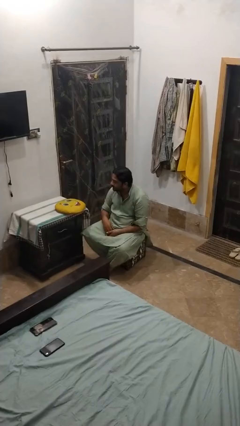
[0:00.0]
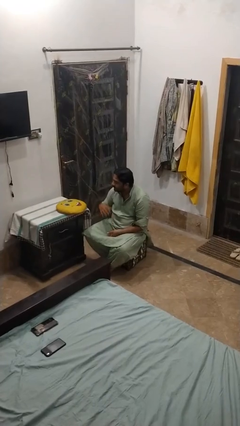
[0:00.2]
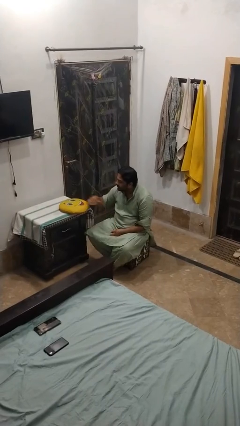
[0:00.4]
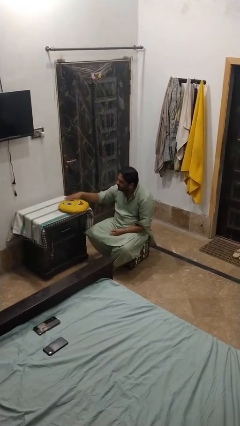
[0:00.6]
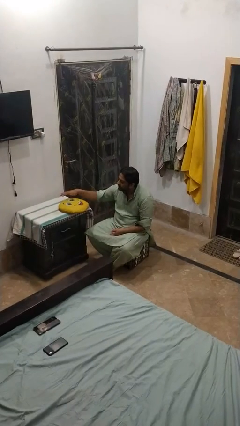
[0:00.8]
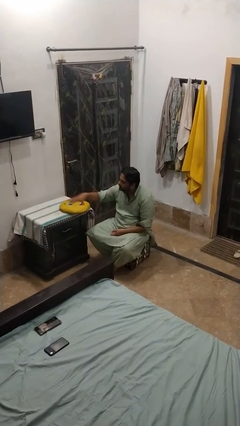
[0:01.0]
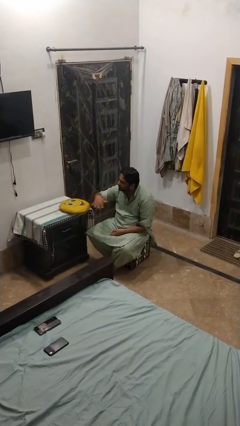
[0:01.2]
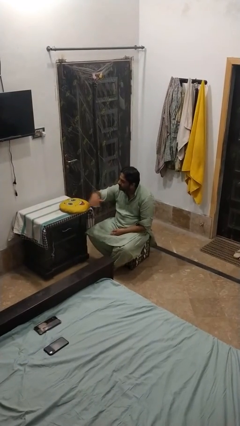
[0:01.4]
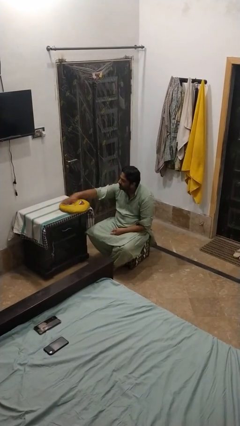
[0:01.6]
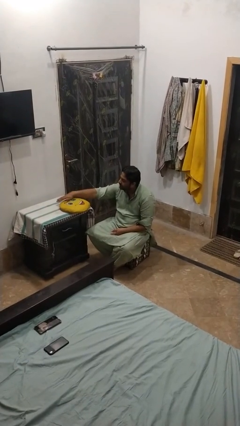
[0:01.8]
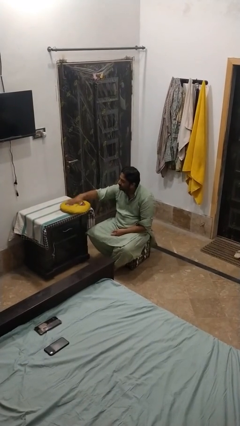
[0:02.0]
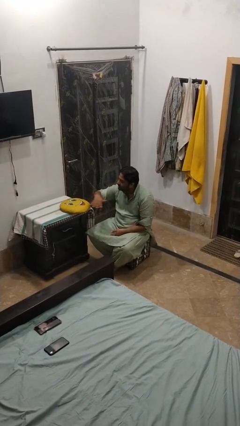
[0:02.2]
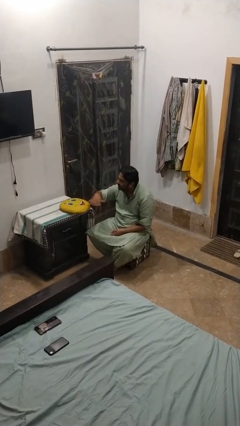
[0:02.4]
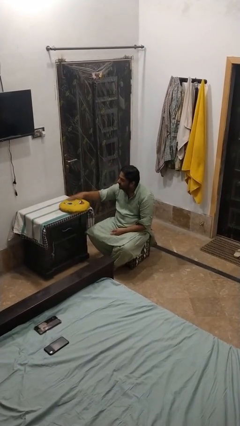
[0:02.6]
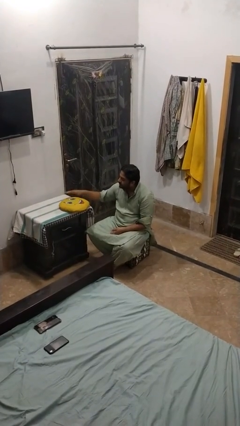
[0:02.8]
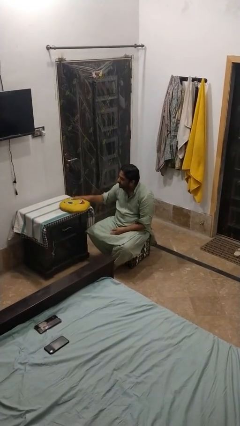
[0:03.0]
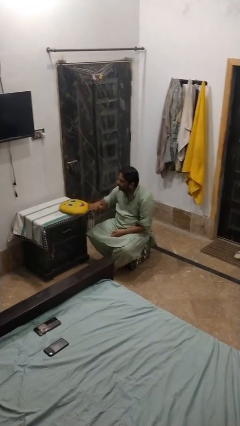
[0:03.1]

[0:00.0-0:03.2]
person waves hand over object

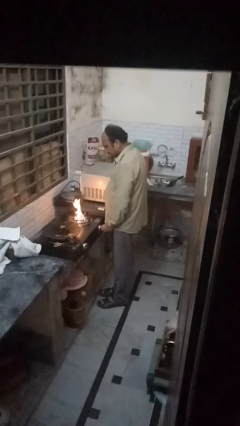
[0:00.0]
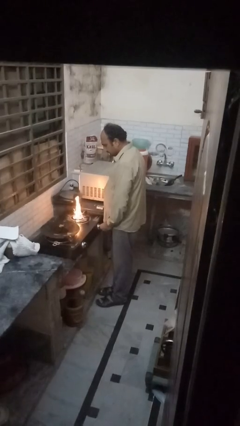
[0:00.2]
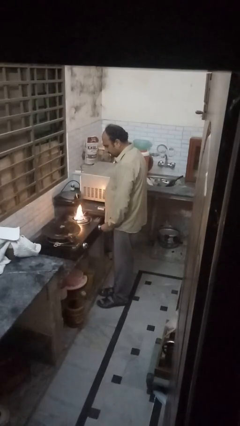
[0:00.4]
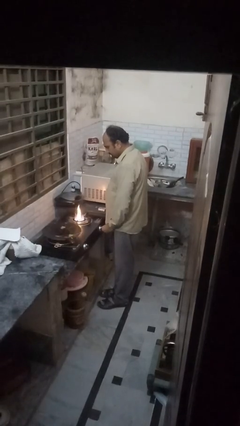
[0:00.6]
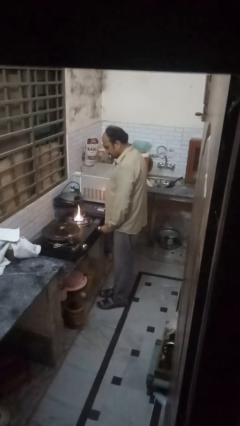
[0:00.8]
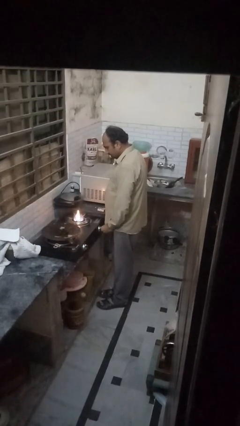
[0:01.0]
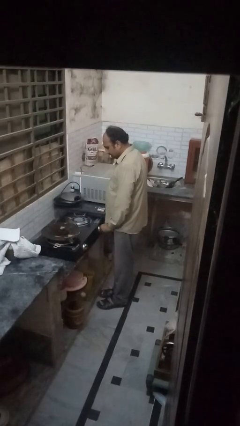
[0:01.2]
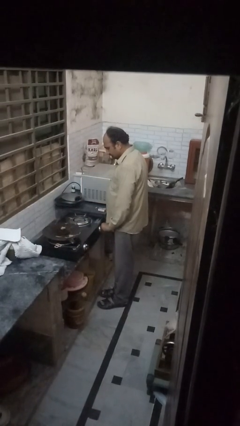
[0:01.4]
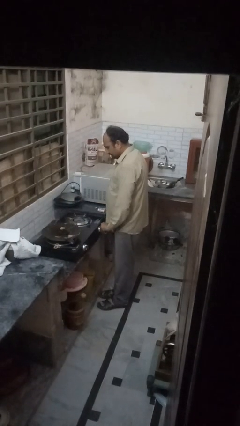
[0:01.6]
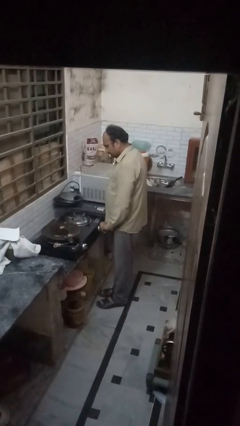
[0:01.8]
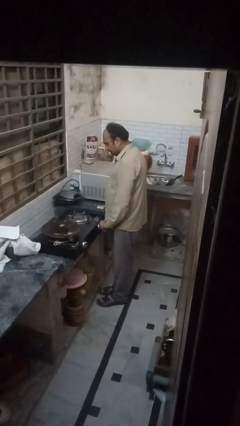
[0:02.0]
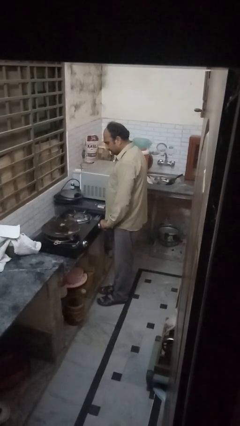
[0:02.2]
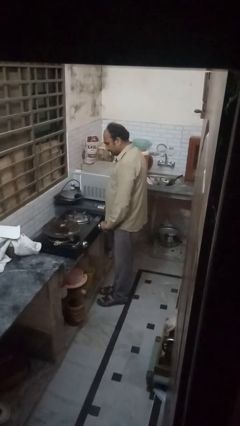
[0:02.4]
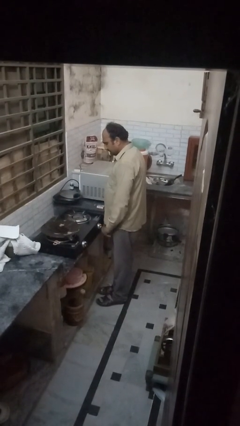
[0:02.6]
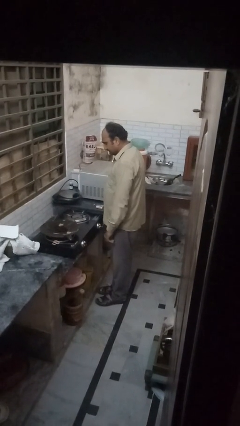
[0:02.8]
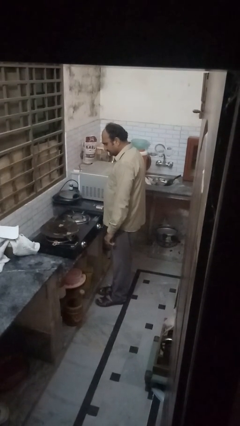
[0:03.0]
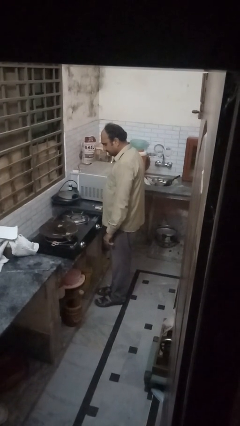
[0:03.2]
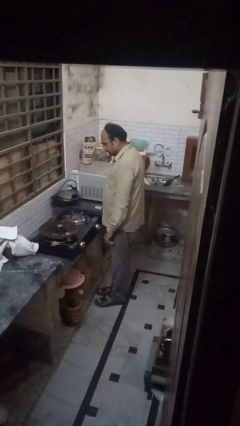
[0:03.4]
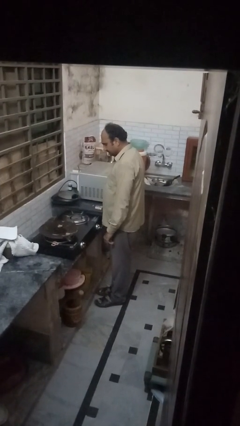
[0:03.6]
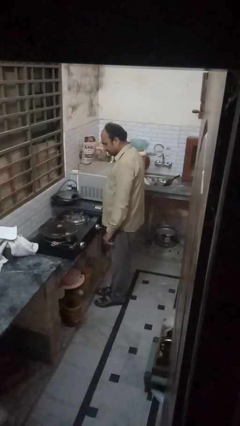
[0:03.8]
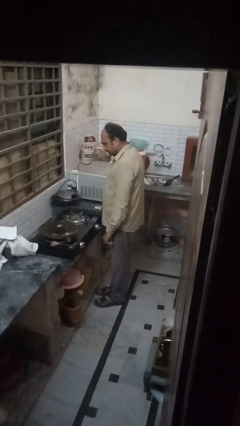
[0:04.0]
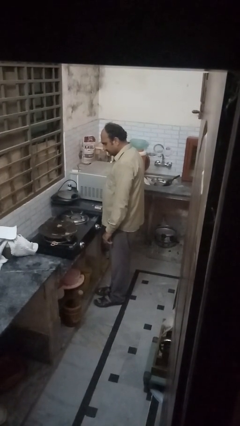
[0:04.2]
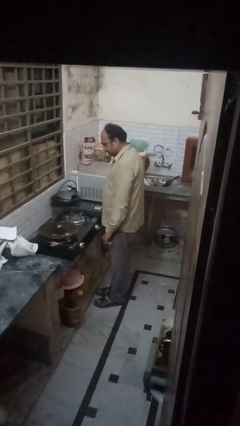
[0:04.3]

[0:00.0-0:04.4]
person turns off stovetop

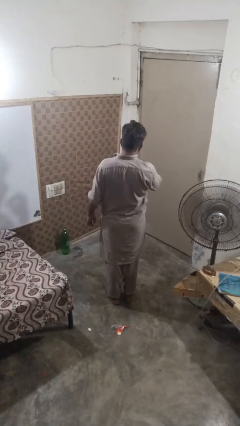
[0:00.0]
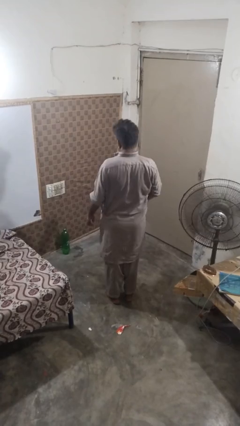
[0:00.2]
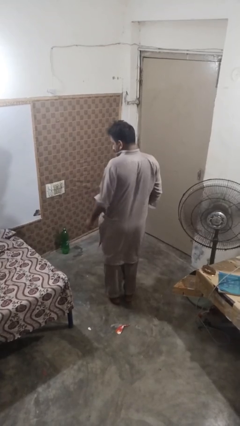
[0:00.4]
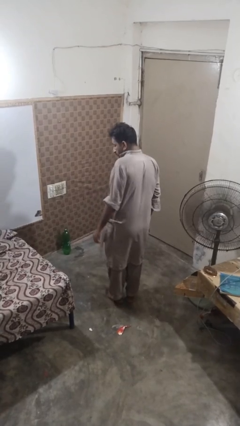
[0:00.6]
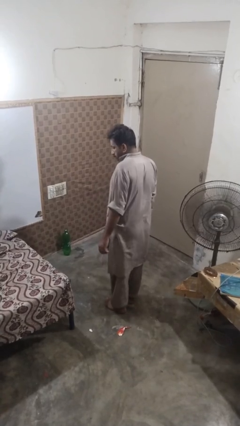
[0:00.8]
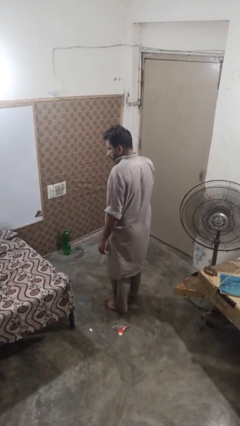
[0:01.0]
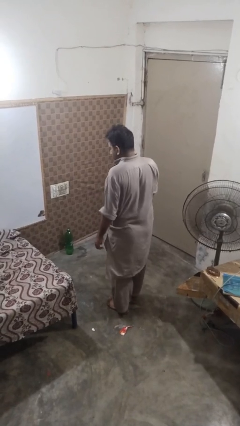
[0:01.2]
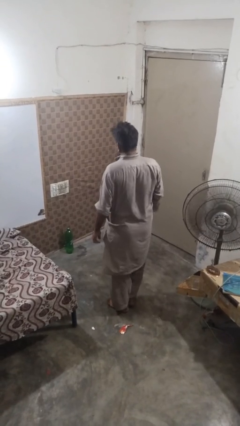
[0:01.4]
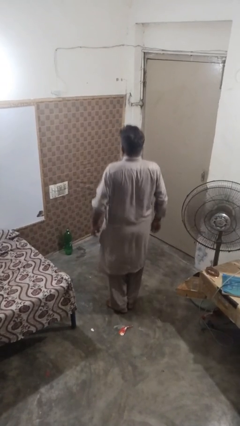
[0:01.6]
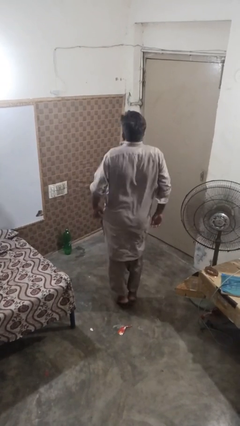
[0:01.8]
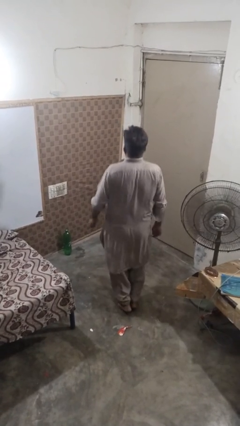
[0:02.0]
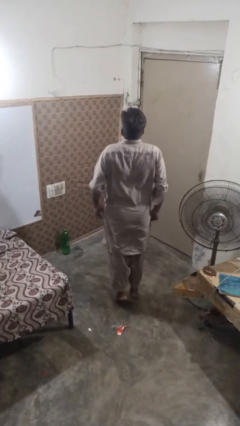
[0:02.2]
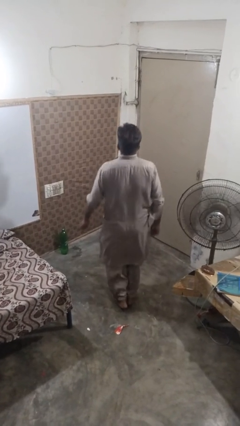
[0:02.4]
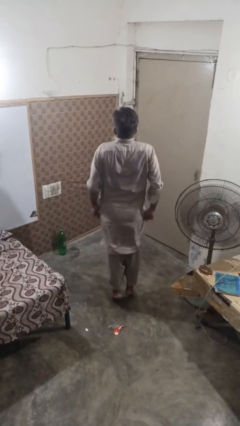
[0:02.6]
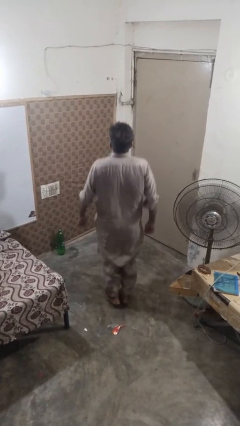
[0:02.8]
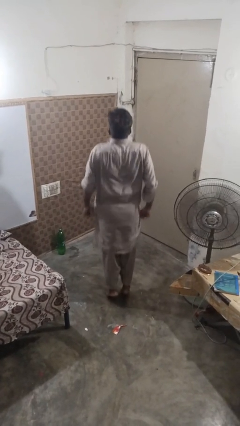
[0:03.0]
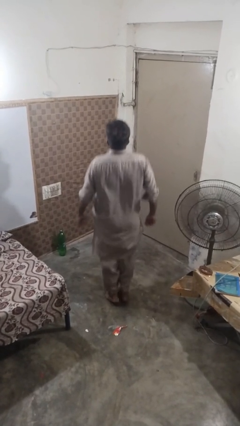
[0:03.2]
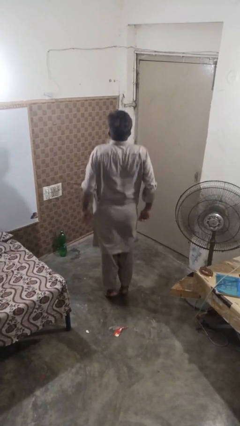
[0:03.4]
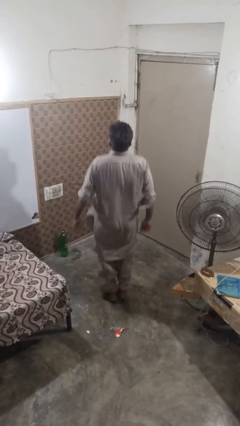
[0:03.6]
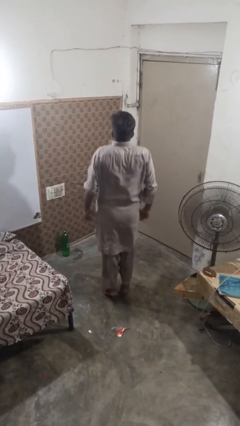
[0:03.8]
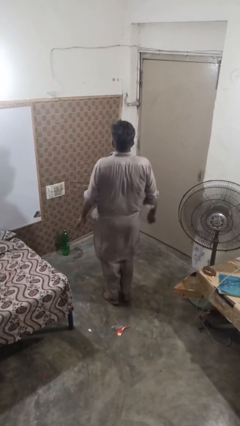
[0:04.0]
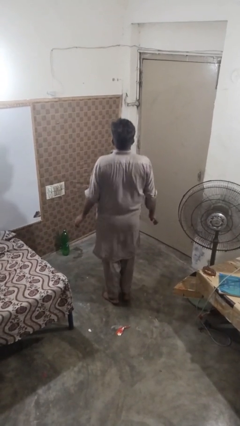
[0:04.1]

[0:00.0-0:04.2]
person jumps

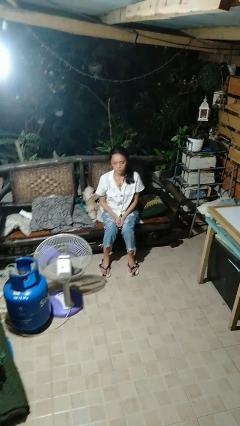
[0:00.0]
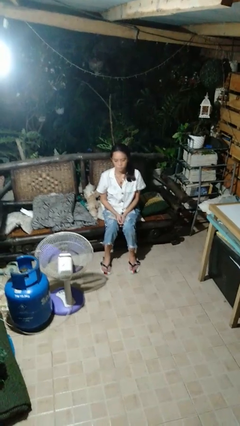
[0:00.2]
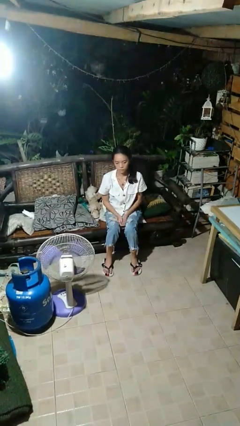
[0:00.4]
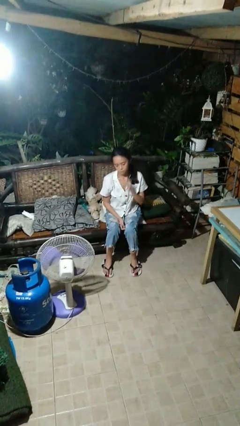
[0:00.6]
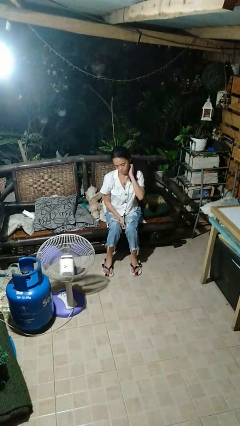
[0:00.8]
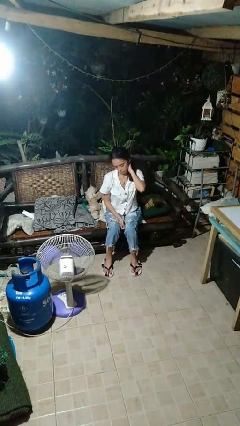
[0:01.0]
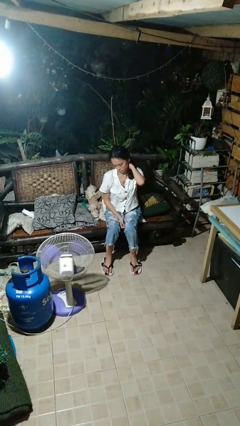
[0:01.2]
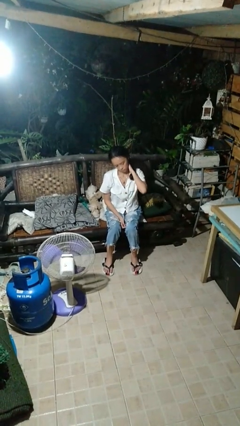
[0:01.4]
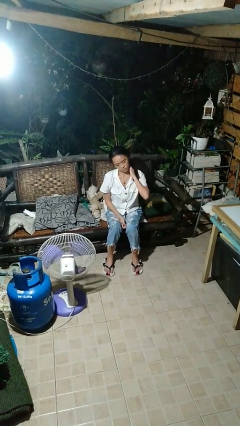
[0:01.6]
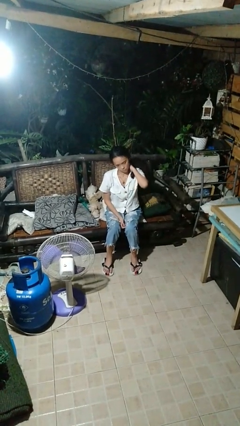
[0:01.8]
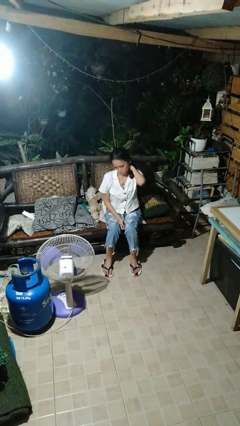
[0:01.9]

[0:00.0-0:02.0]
person rubs neck

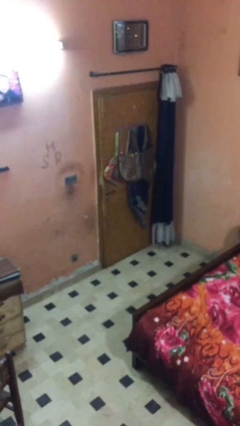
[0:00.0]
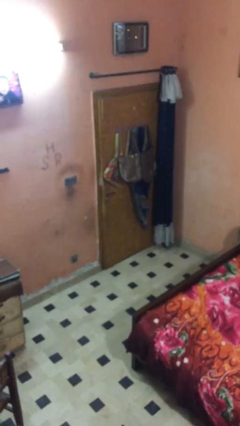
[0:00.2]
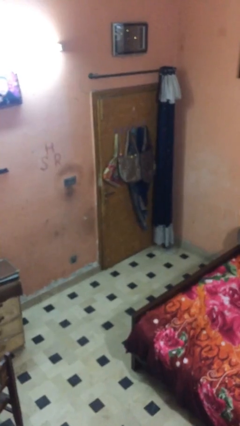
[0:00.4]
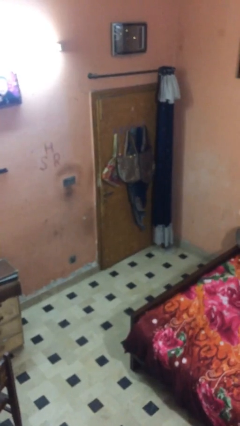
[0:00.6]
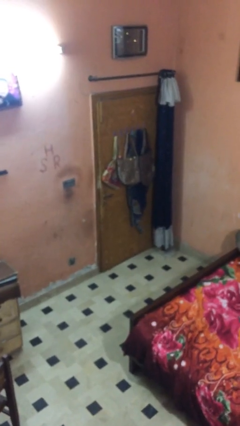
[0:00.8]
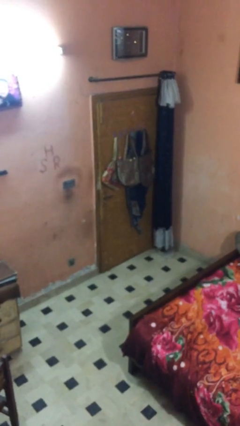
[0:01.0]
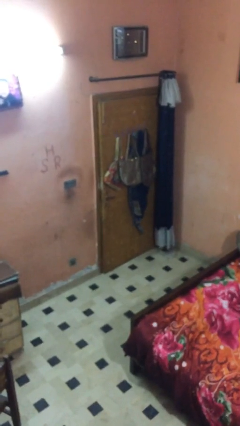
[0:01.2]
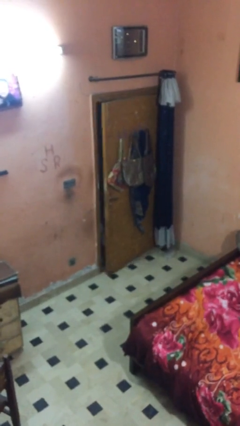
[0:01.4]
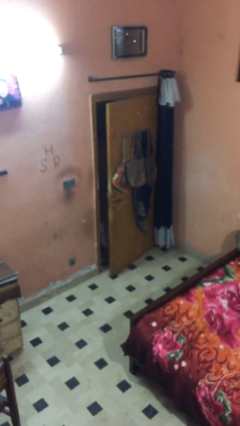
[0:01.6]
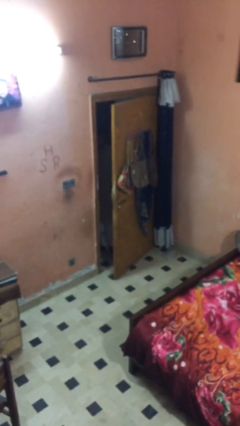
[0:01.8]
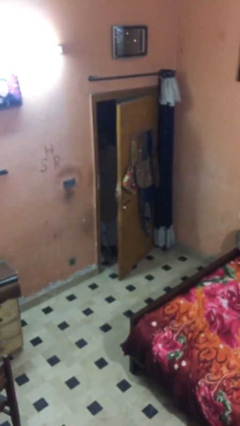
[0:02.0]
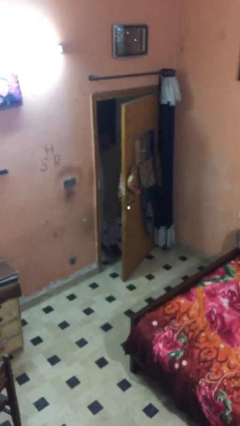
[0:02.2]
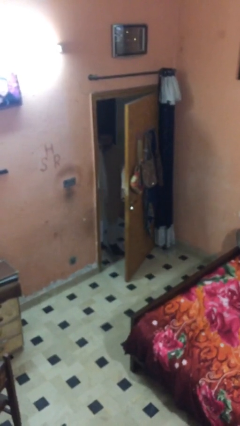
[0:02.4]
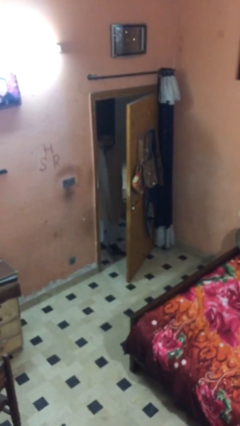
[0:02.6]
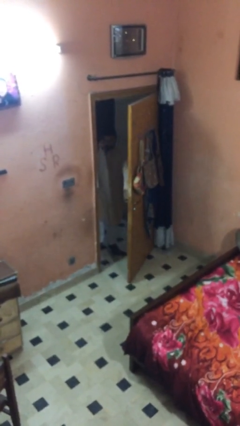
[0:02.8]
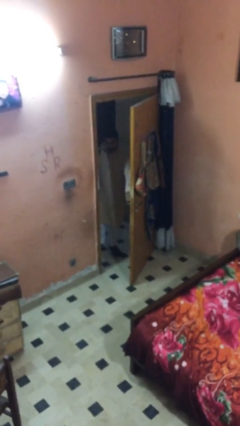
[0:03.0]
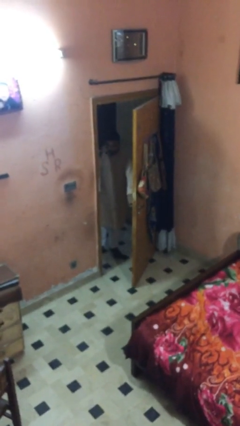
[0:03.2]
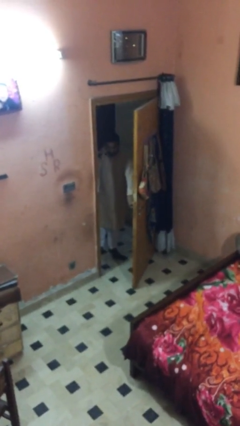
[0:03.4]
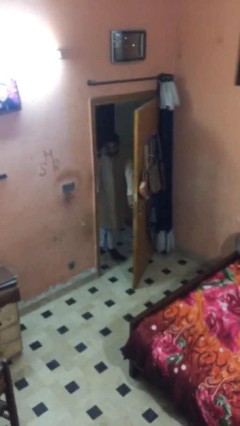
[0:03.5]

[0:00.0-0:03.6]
person opens facility door
